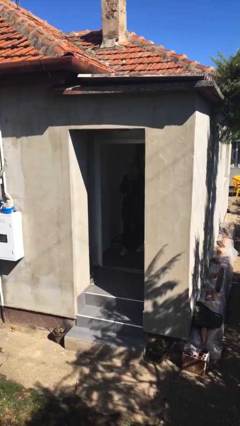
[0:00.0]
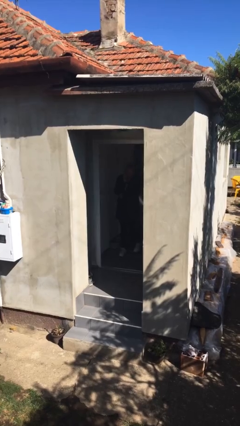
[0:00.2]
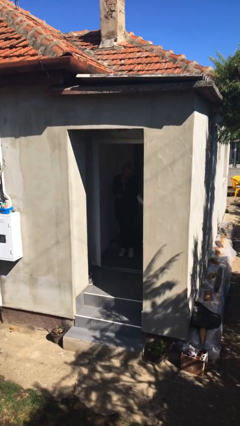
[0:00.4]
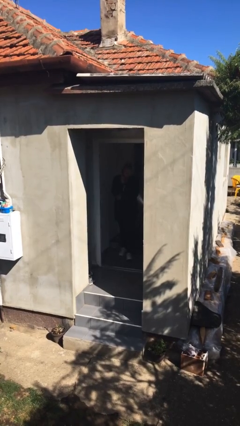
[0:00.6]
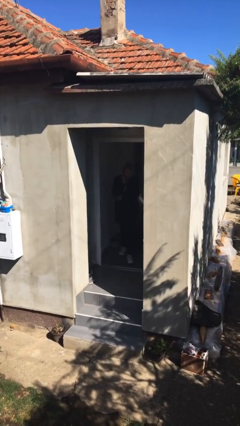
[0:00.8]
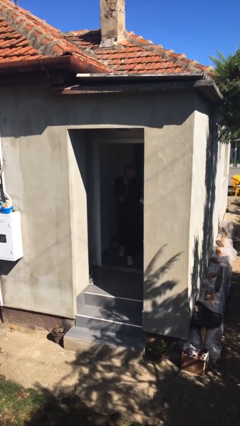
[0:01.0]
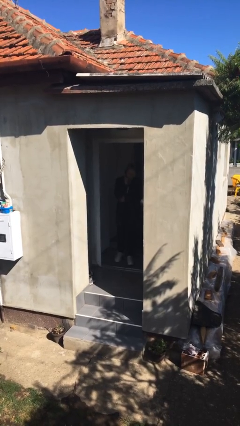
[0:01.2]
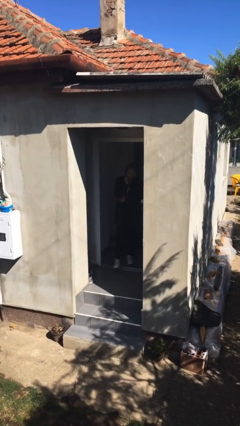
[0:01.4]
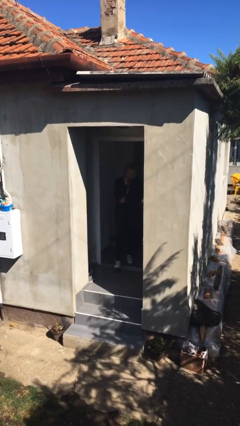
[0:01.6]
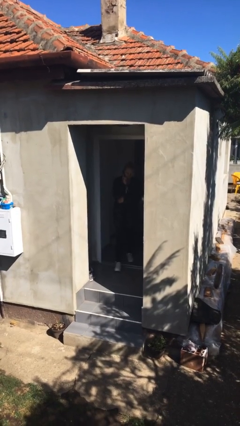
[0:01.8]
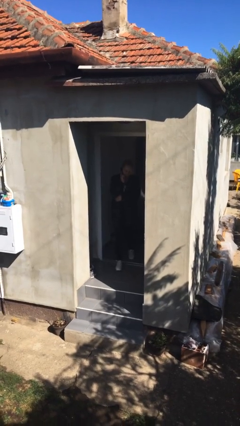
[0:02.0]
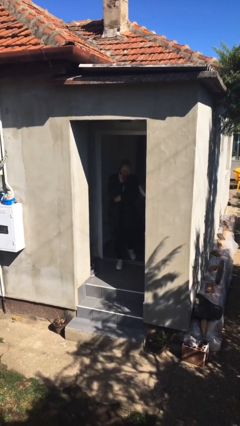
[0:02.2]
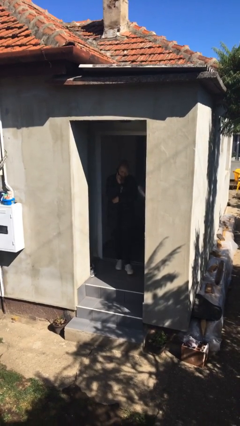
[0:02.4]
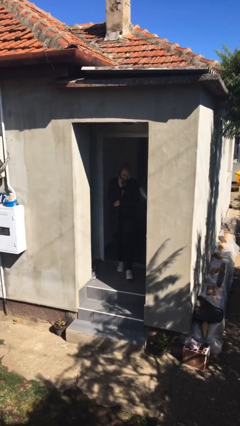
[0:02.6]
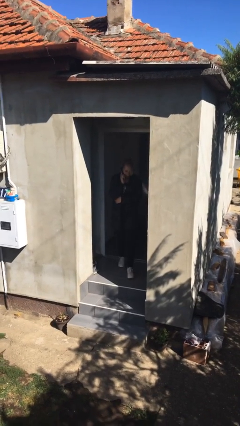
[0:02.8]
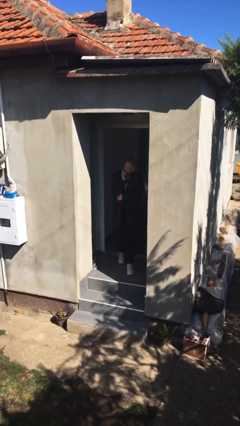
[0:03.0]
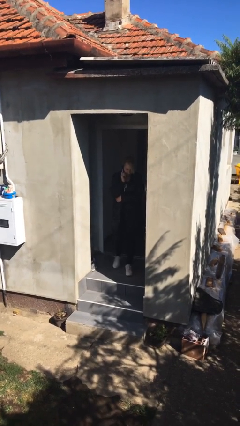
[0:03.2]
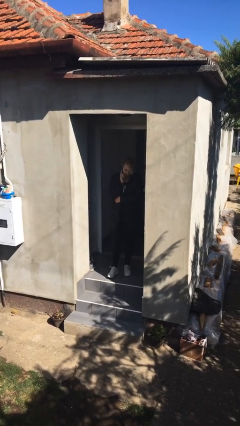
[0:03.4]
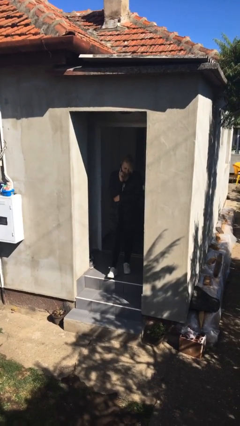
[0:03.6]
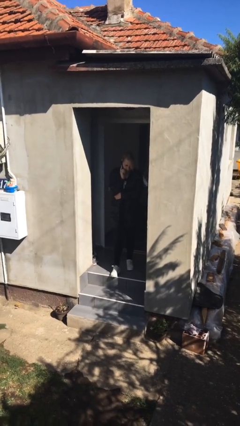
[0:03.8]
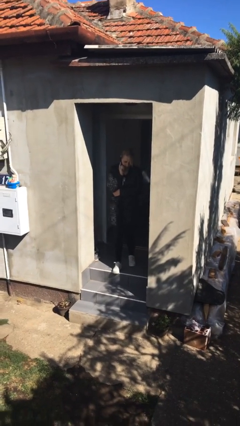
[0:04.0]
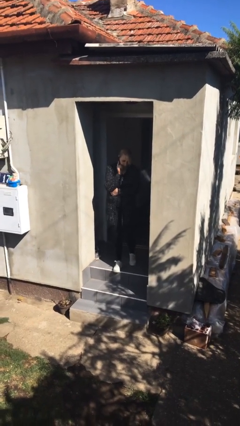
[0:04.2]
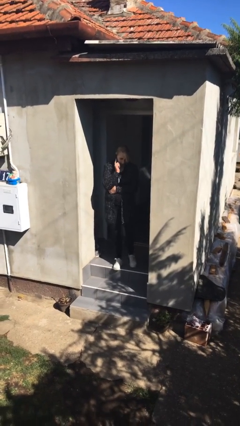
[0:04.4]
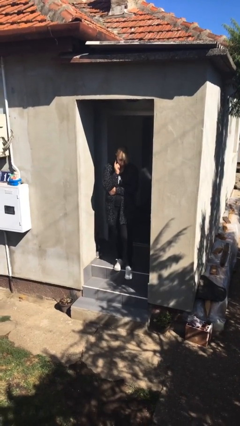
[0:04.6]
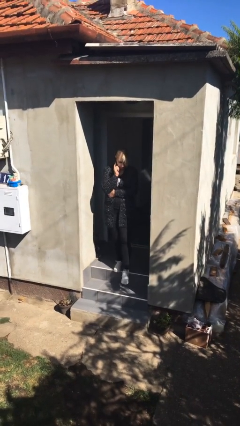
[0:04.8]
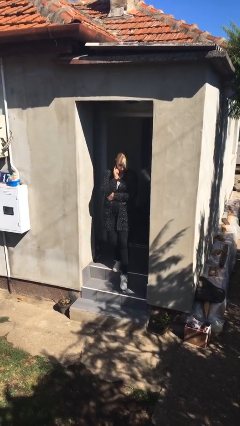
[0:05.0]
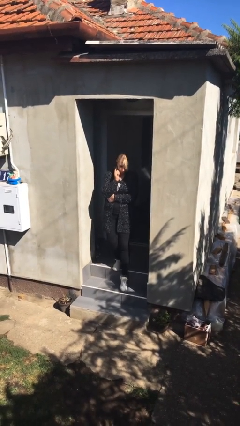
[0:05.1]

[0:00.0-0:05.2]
person enters scene through structure

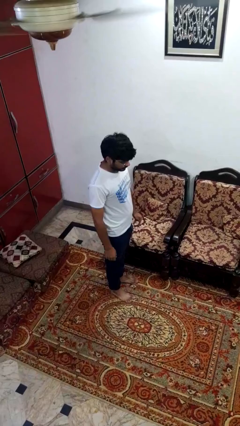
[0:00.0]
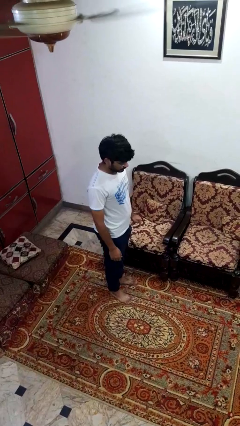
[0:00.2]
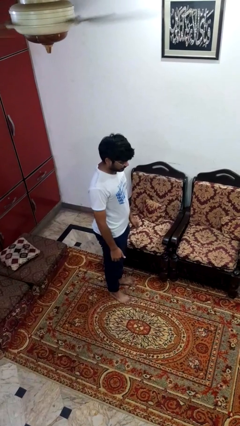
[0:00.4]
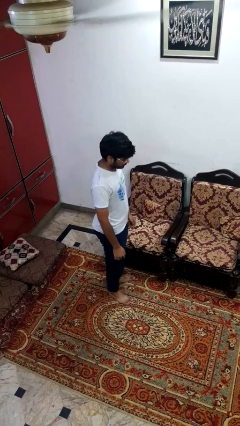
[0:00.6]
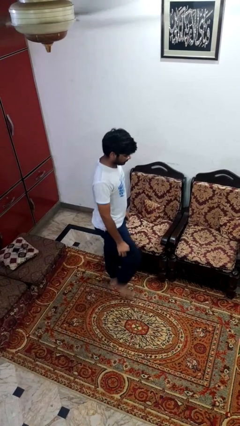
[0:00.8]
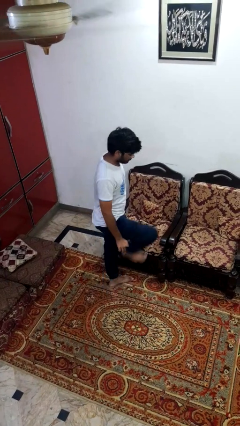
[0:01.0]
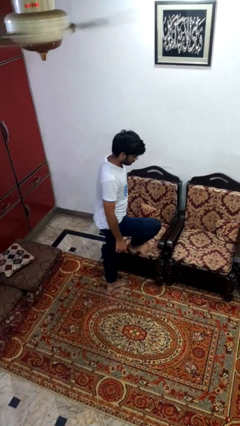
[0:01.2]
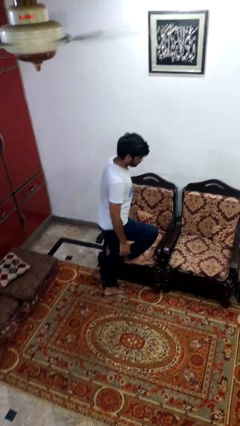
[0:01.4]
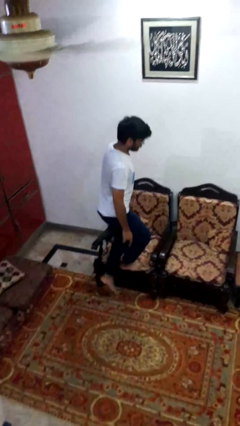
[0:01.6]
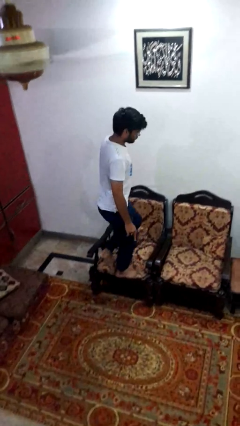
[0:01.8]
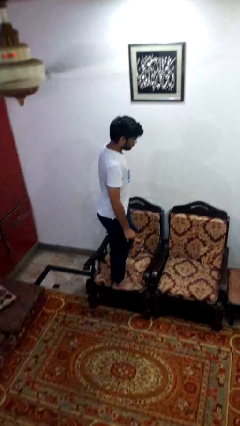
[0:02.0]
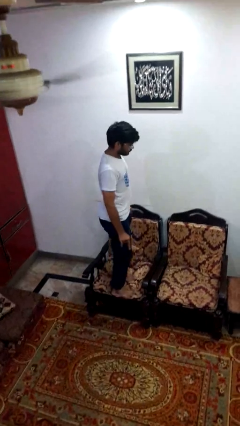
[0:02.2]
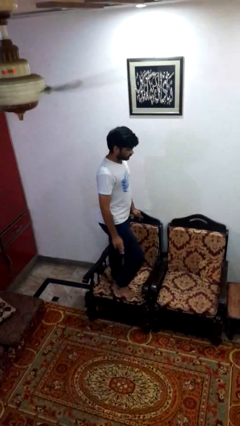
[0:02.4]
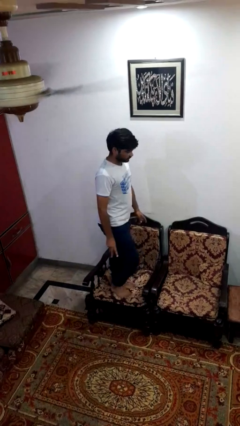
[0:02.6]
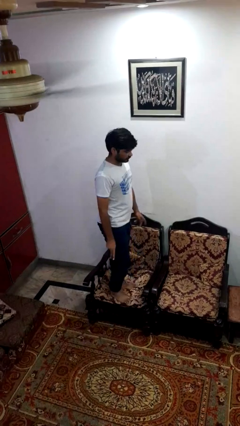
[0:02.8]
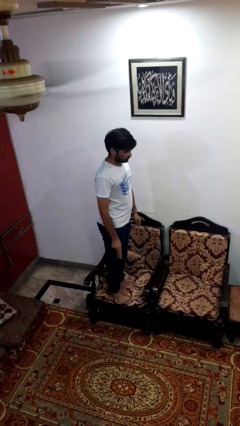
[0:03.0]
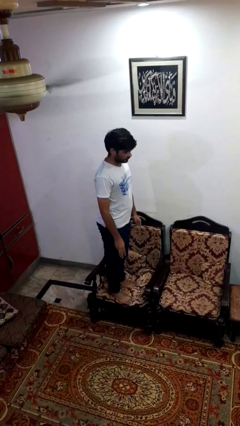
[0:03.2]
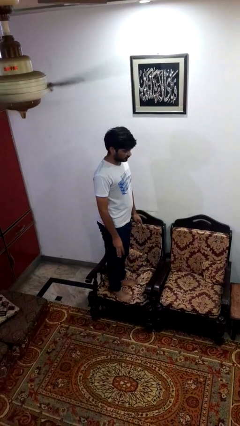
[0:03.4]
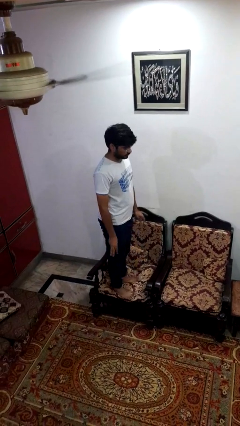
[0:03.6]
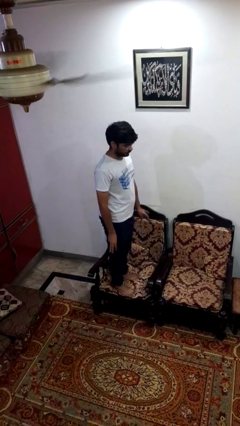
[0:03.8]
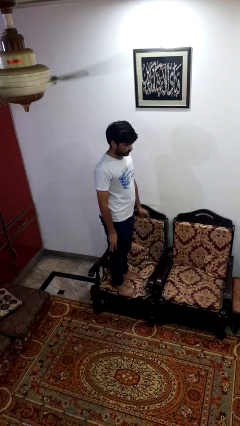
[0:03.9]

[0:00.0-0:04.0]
person climbs on couch

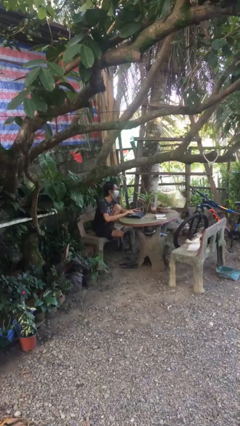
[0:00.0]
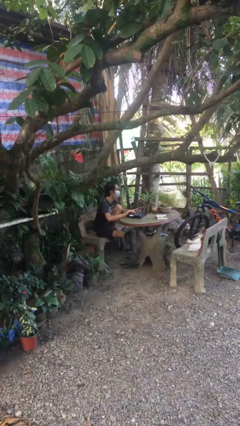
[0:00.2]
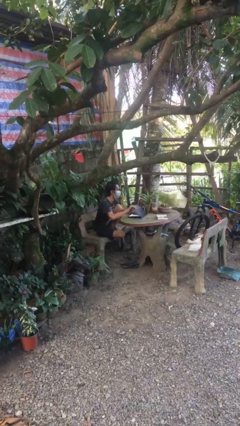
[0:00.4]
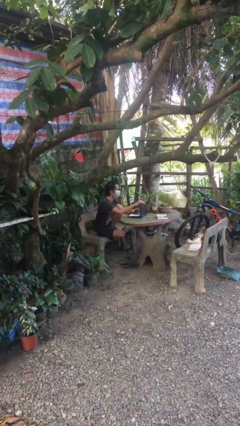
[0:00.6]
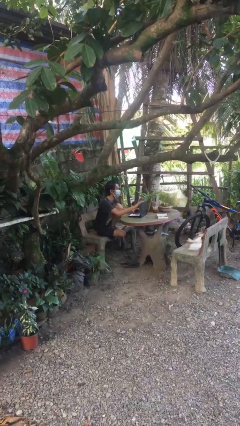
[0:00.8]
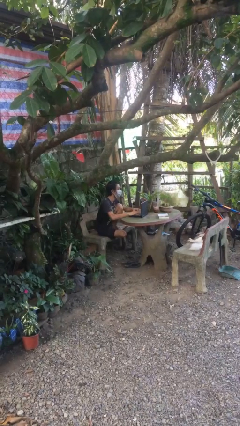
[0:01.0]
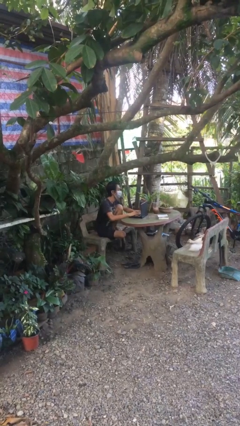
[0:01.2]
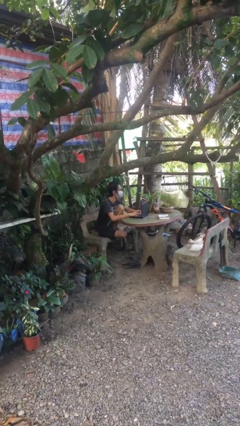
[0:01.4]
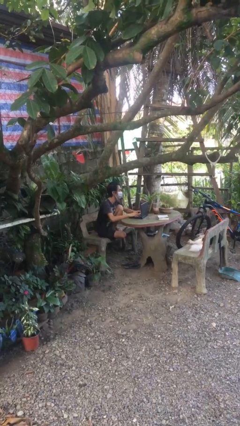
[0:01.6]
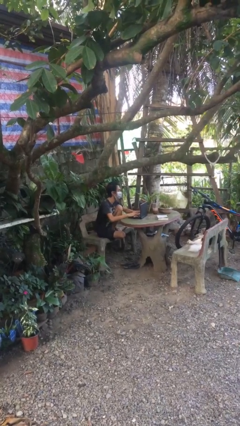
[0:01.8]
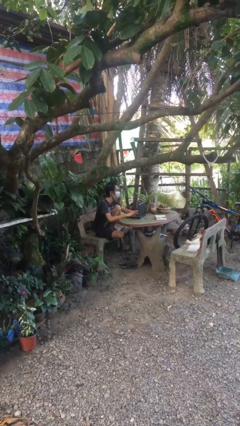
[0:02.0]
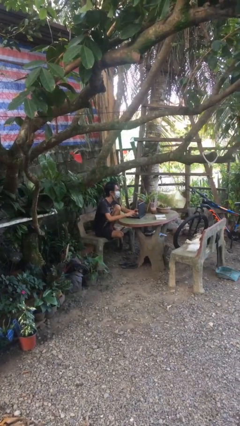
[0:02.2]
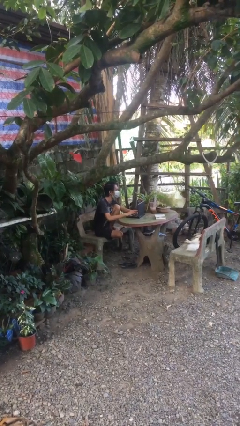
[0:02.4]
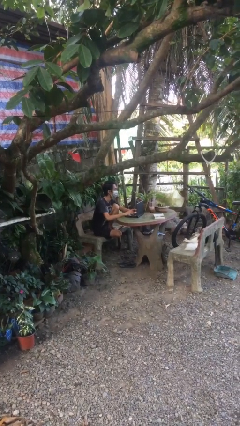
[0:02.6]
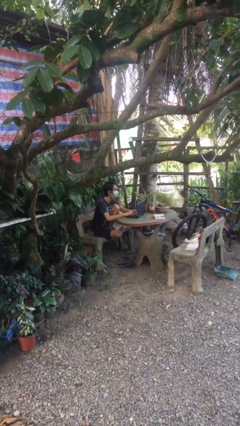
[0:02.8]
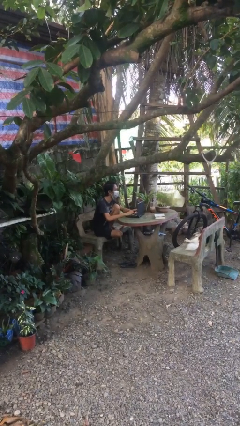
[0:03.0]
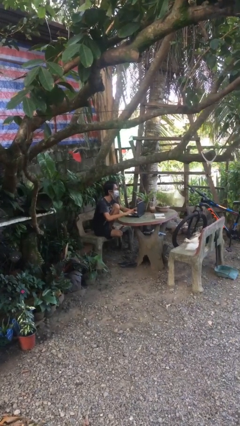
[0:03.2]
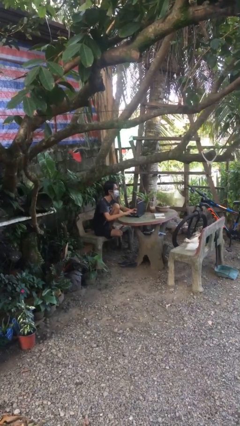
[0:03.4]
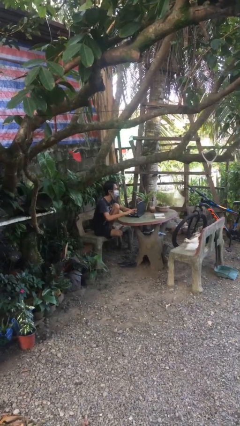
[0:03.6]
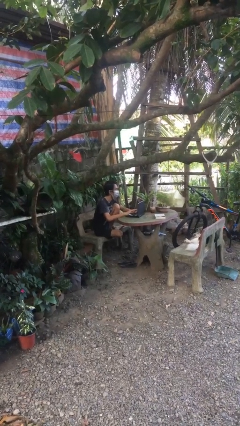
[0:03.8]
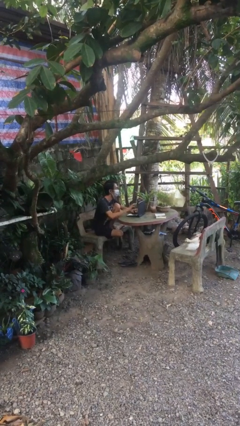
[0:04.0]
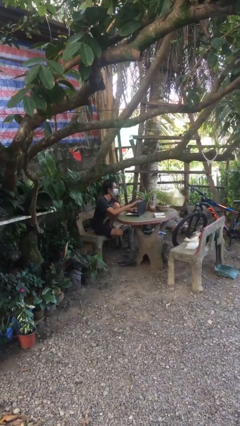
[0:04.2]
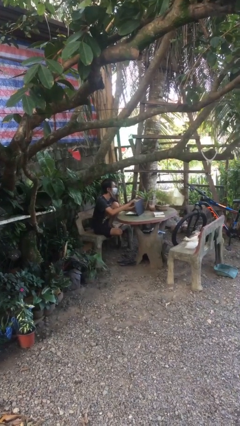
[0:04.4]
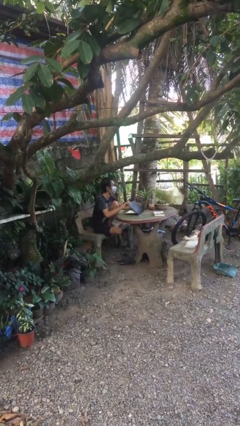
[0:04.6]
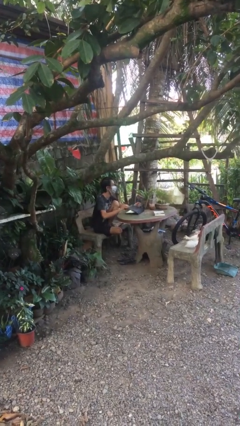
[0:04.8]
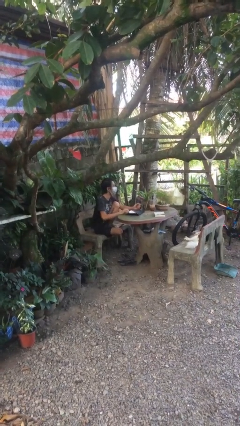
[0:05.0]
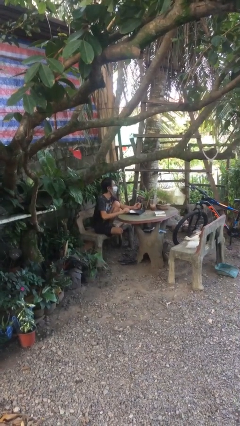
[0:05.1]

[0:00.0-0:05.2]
person interacts with laptop

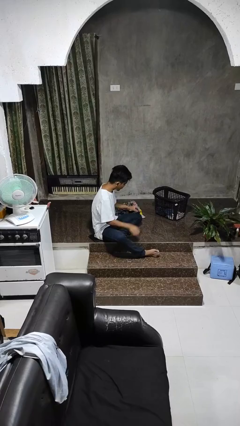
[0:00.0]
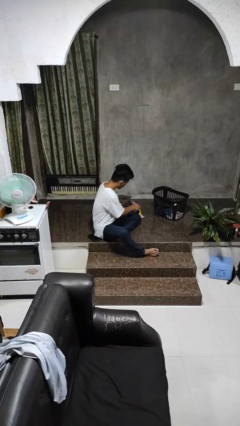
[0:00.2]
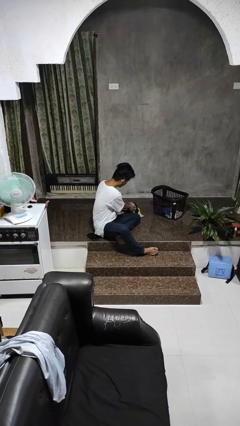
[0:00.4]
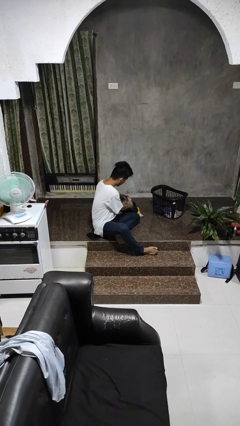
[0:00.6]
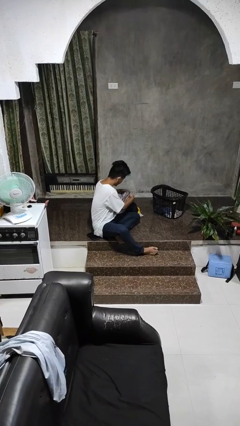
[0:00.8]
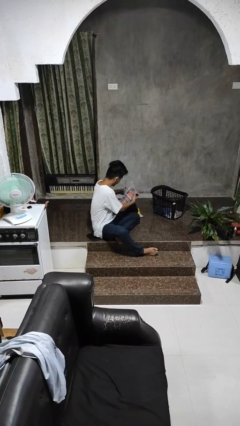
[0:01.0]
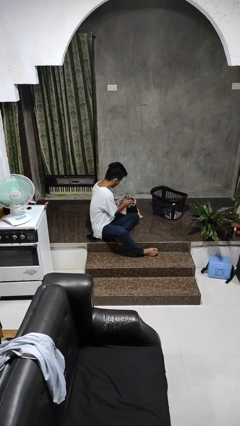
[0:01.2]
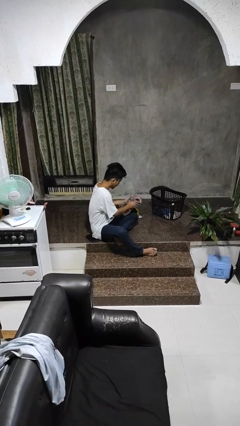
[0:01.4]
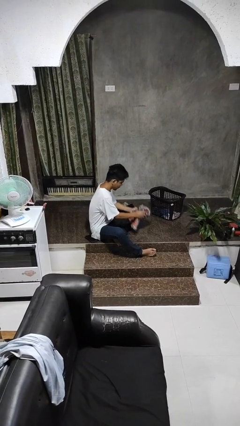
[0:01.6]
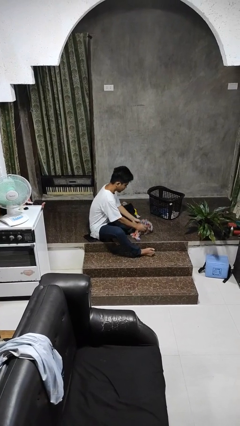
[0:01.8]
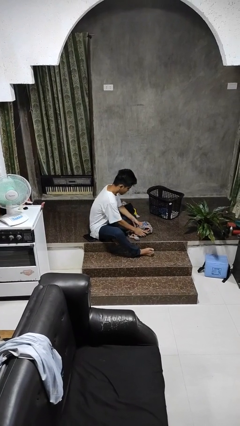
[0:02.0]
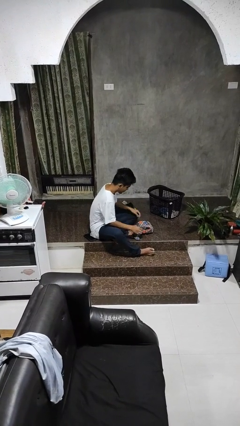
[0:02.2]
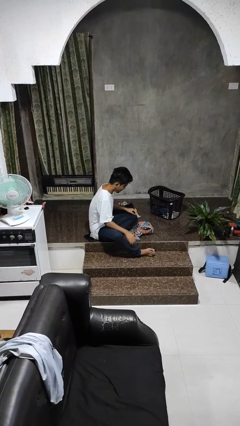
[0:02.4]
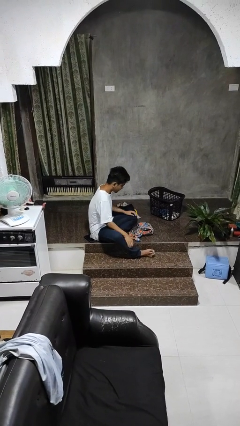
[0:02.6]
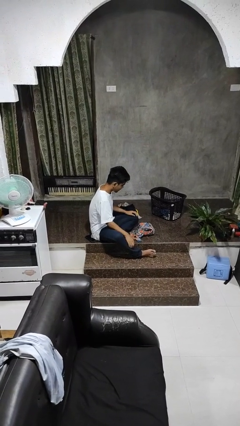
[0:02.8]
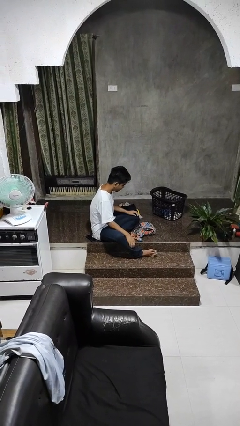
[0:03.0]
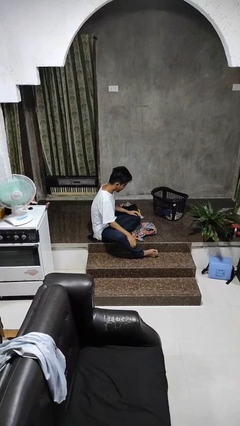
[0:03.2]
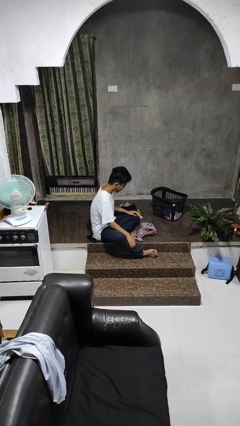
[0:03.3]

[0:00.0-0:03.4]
person folds shirt

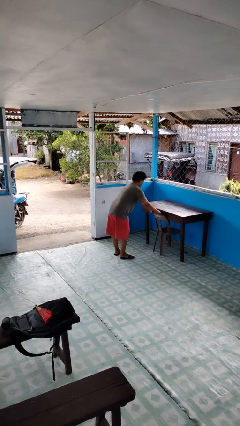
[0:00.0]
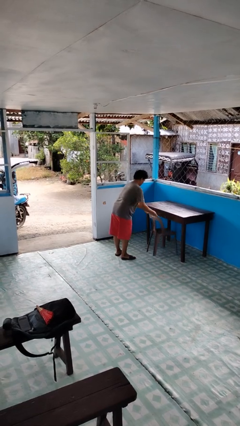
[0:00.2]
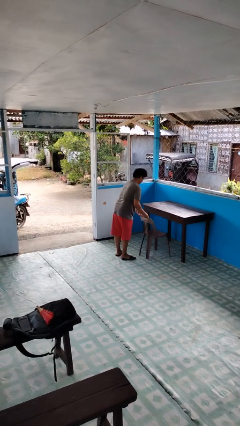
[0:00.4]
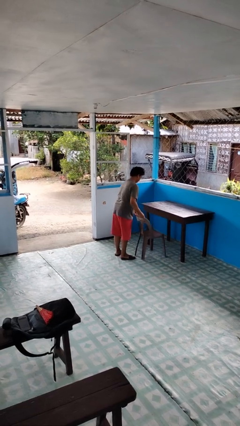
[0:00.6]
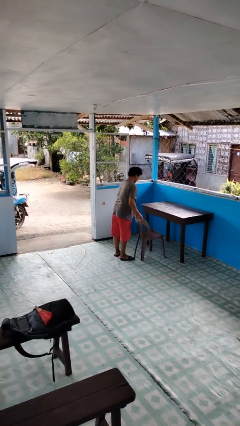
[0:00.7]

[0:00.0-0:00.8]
person pulls out chair
